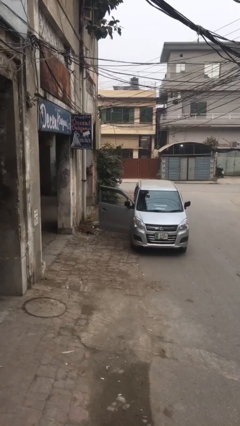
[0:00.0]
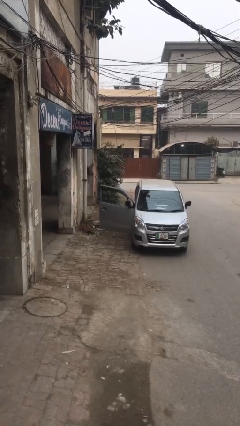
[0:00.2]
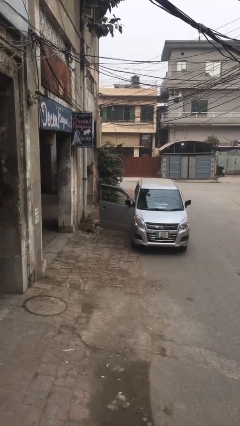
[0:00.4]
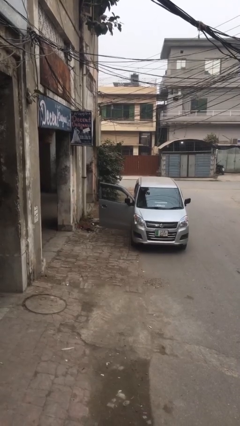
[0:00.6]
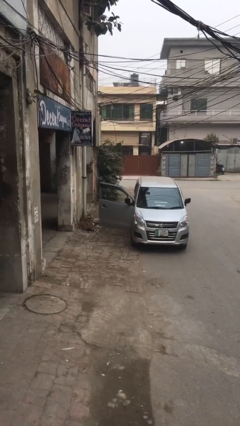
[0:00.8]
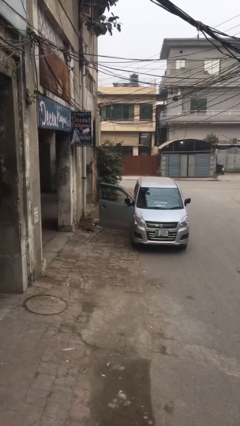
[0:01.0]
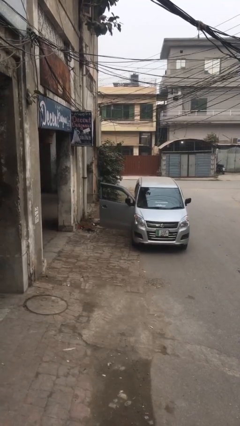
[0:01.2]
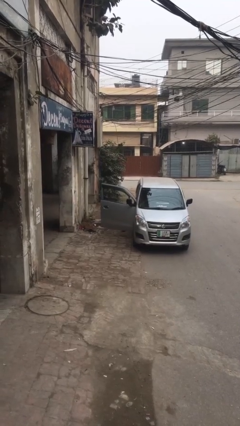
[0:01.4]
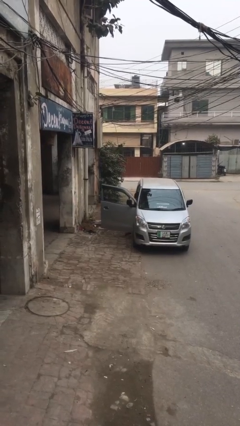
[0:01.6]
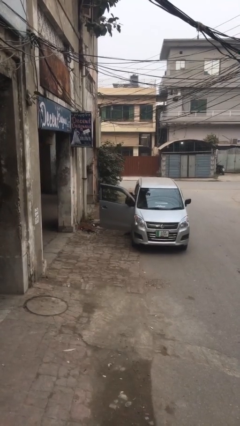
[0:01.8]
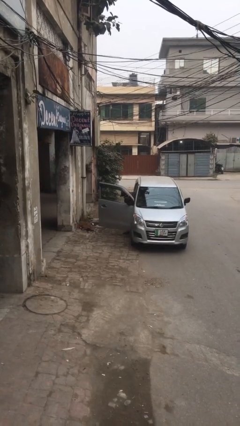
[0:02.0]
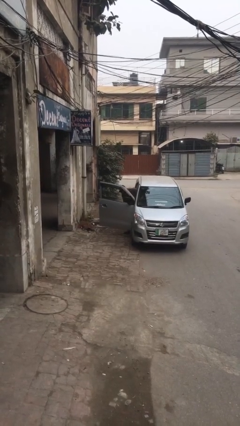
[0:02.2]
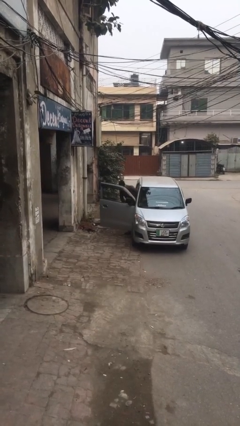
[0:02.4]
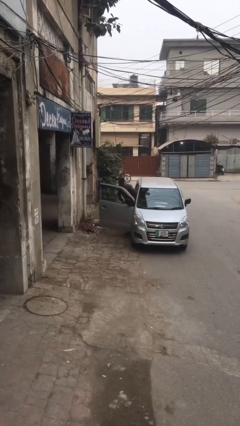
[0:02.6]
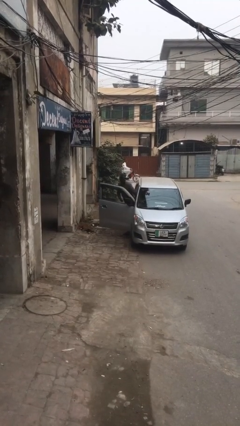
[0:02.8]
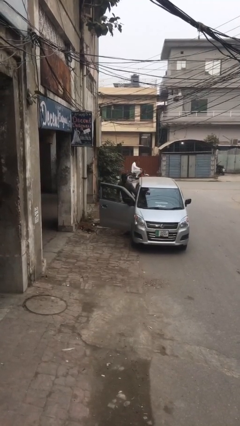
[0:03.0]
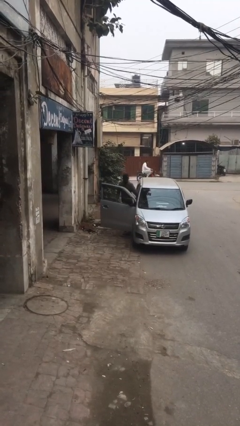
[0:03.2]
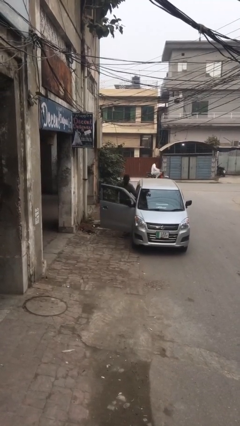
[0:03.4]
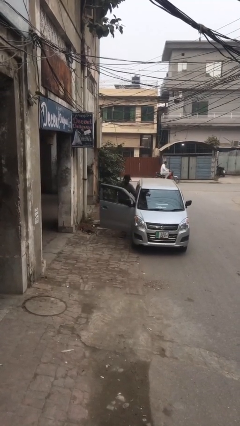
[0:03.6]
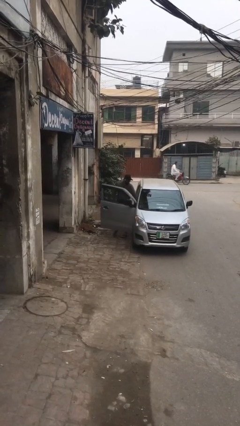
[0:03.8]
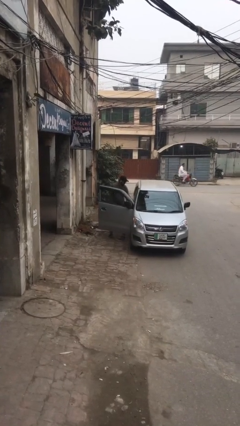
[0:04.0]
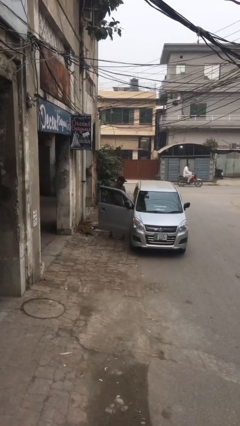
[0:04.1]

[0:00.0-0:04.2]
person exits car

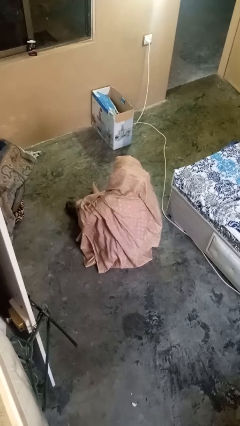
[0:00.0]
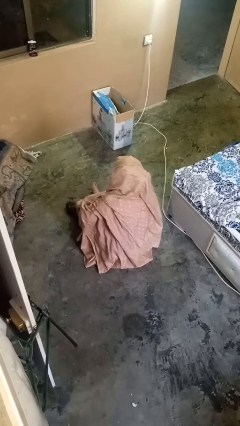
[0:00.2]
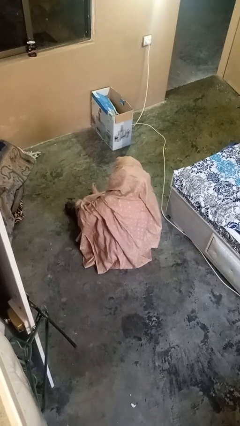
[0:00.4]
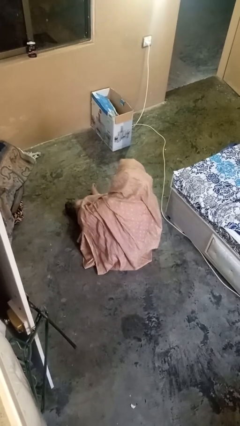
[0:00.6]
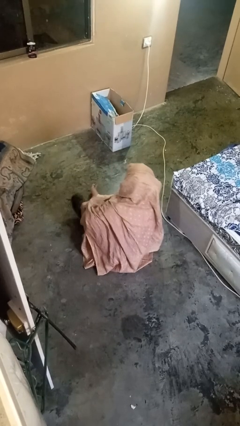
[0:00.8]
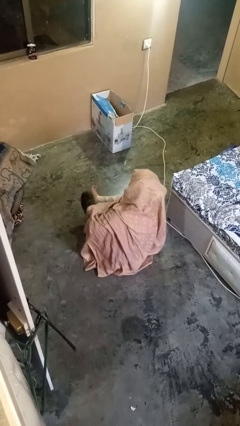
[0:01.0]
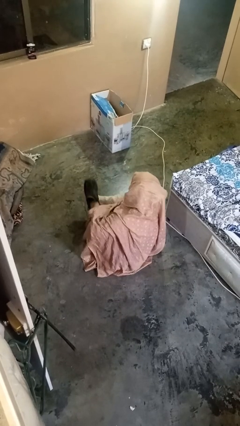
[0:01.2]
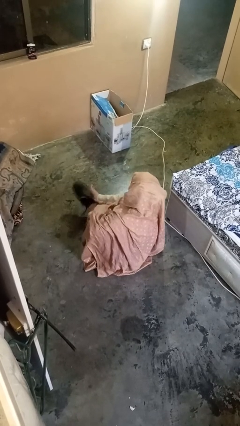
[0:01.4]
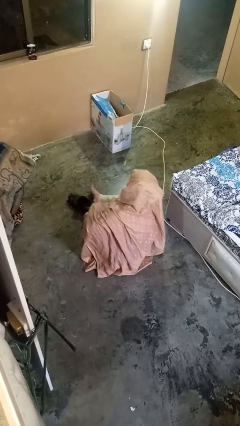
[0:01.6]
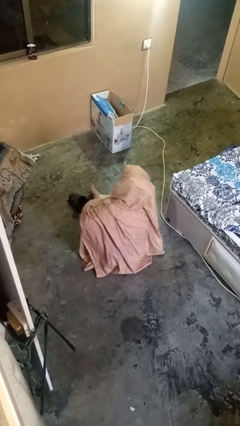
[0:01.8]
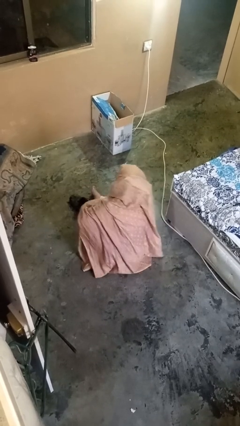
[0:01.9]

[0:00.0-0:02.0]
person takes off shoes

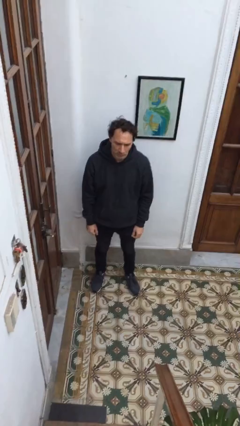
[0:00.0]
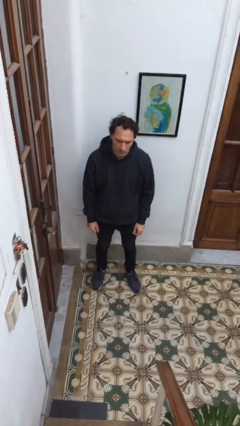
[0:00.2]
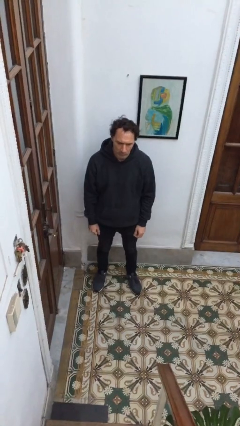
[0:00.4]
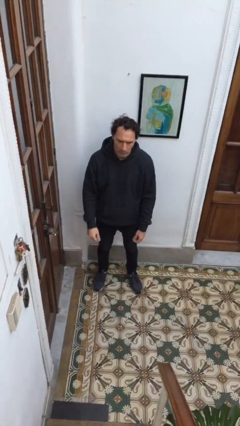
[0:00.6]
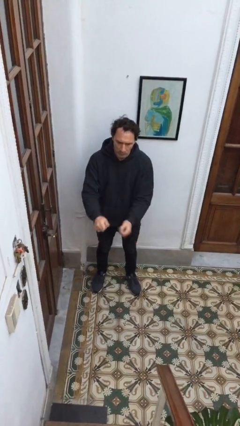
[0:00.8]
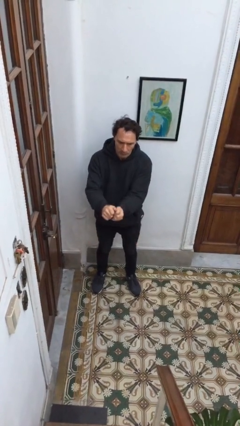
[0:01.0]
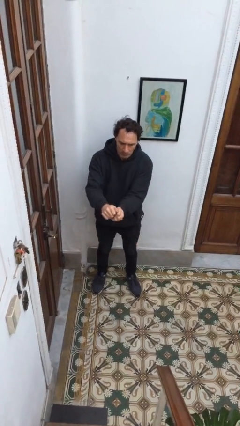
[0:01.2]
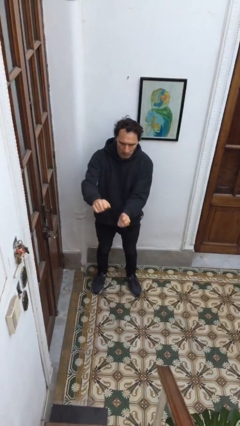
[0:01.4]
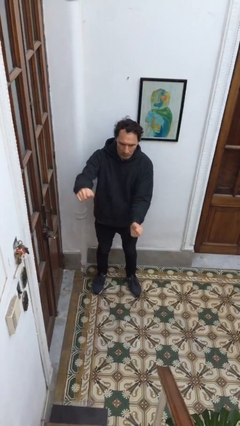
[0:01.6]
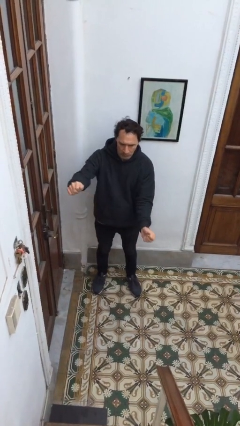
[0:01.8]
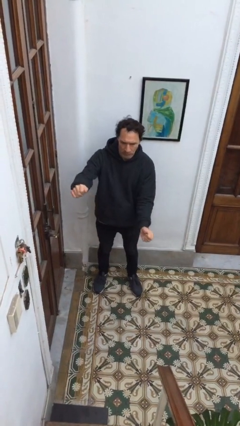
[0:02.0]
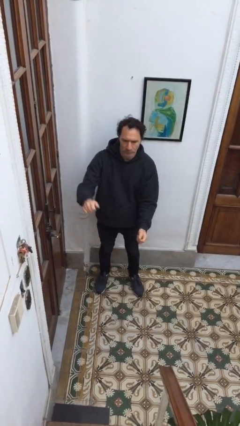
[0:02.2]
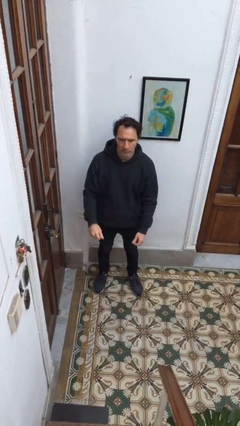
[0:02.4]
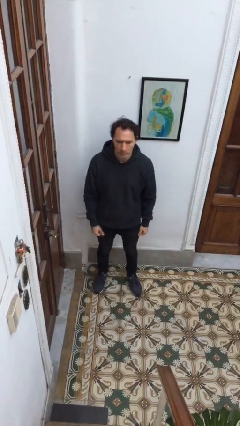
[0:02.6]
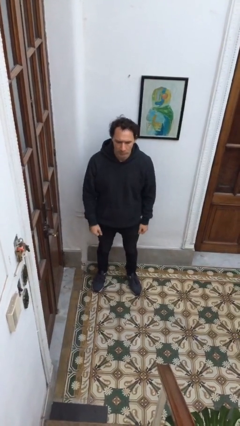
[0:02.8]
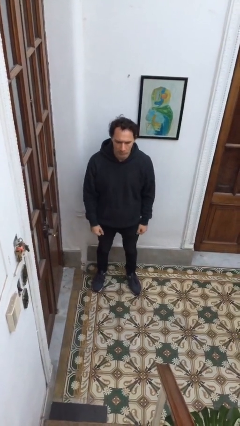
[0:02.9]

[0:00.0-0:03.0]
person gestures zoom in

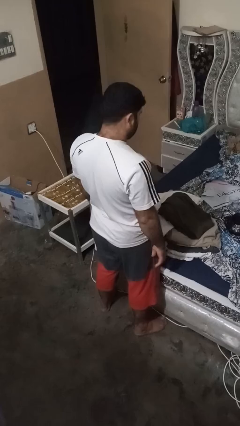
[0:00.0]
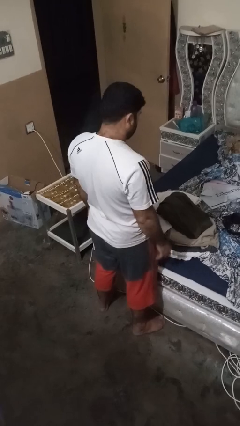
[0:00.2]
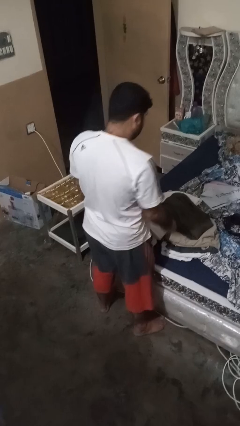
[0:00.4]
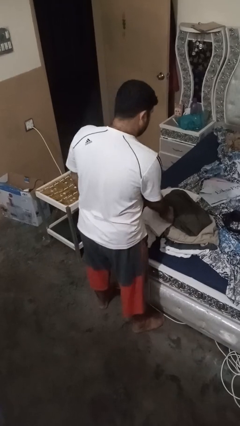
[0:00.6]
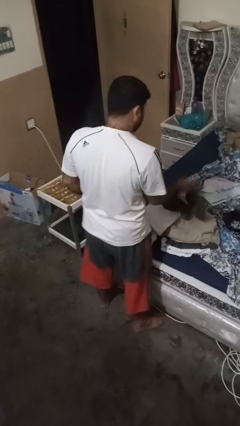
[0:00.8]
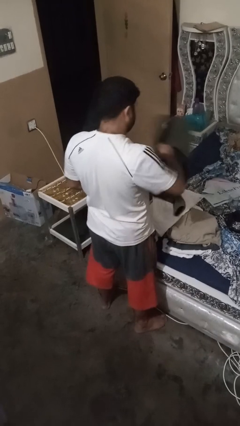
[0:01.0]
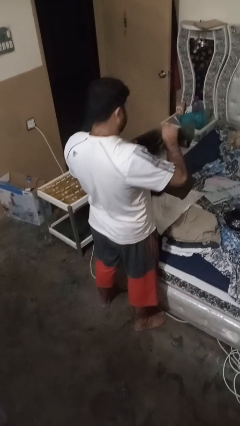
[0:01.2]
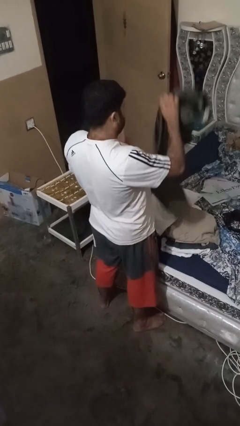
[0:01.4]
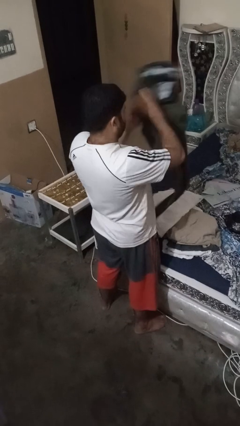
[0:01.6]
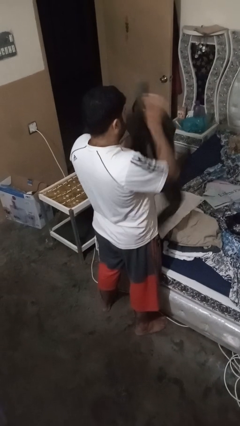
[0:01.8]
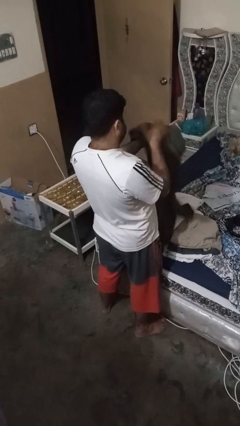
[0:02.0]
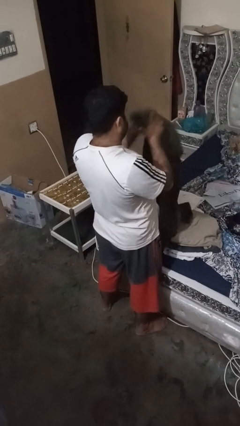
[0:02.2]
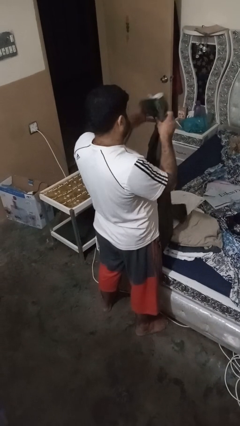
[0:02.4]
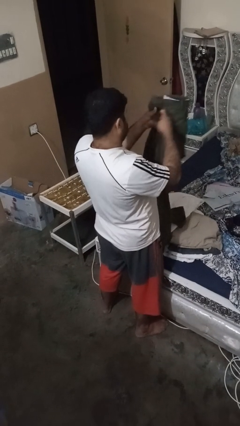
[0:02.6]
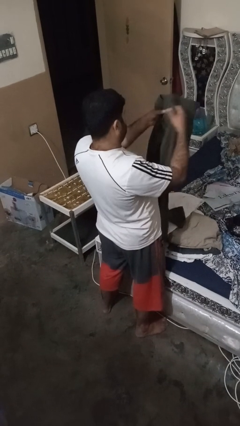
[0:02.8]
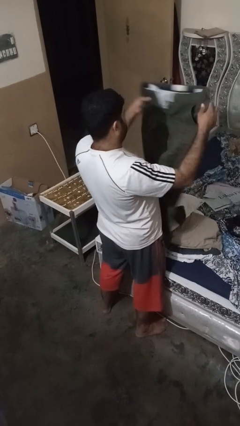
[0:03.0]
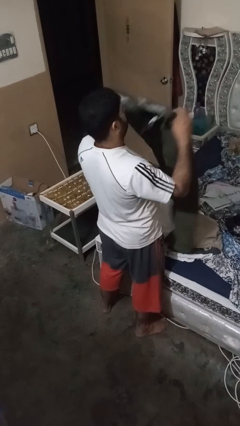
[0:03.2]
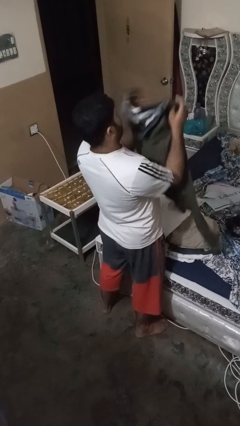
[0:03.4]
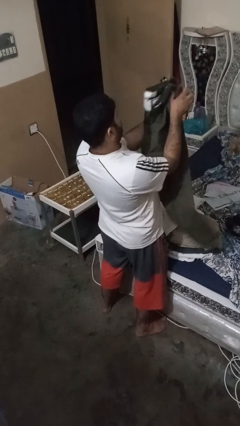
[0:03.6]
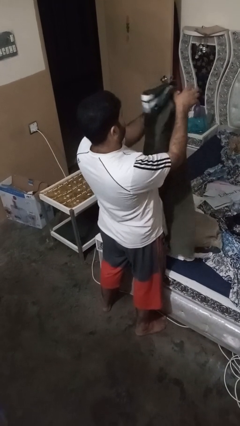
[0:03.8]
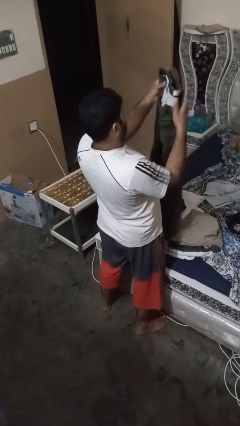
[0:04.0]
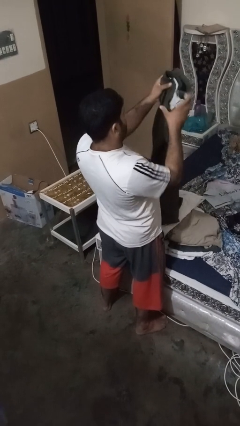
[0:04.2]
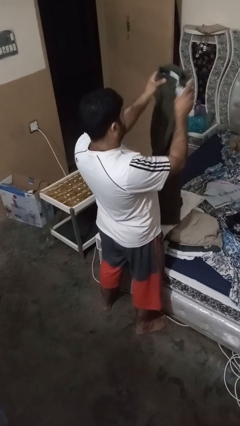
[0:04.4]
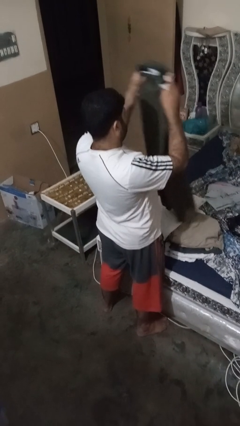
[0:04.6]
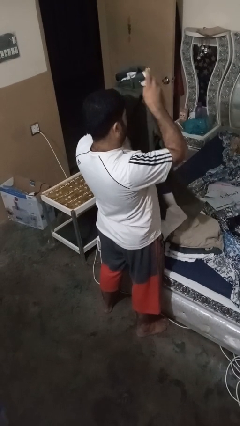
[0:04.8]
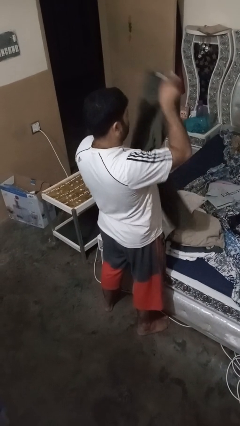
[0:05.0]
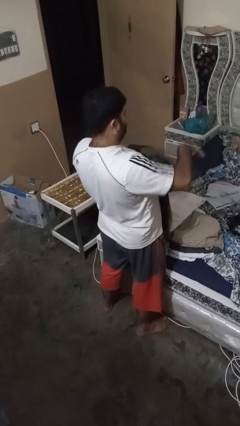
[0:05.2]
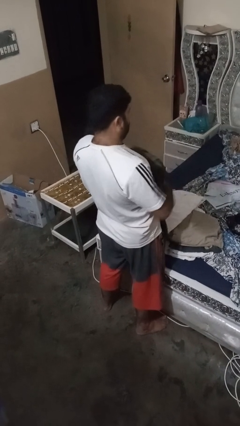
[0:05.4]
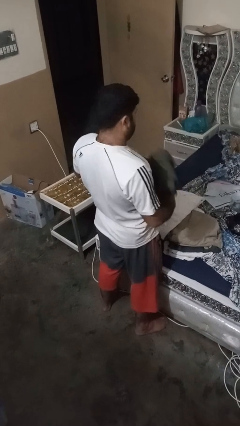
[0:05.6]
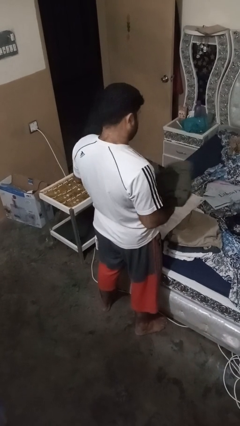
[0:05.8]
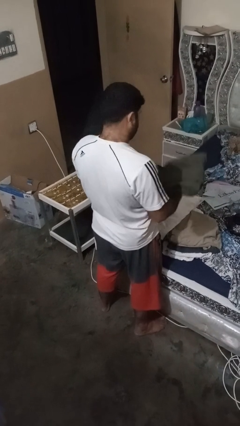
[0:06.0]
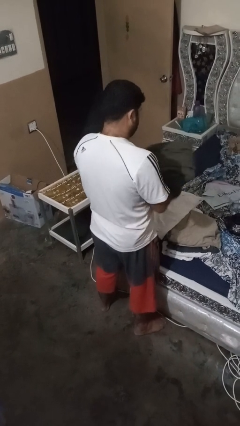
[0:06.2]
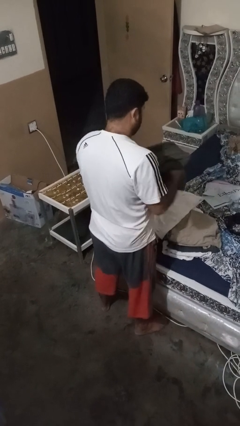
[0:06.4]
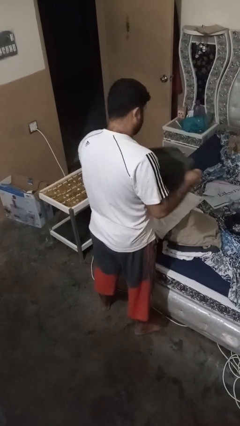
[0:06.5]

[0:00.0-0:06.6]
person folds pants

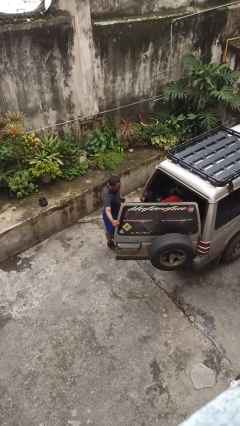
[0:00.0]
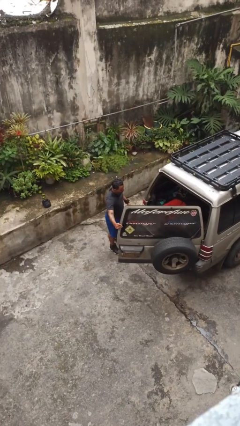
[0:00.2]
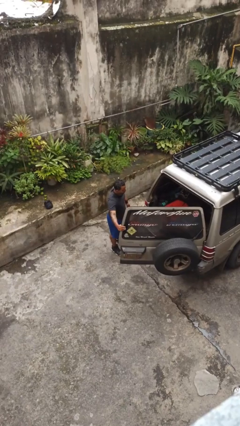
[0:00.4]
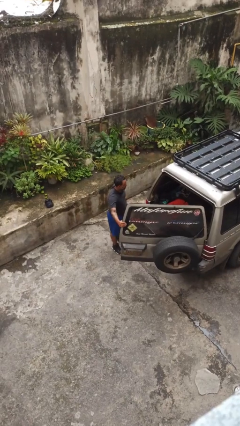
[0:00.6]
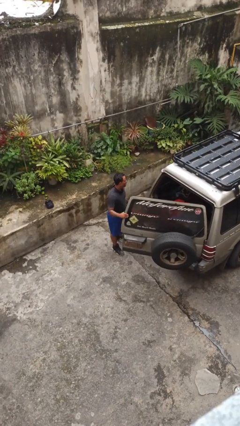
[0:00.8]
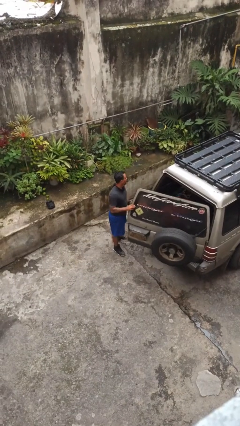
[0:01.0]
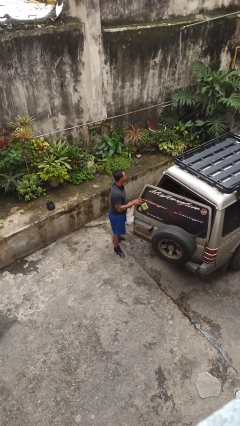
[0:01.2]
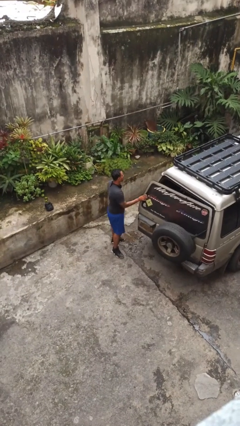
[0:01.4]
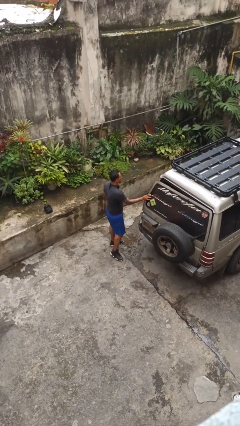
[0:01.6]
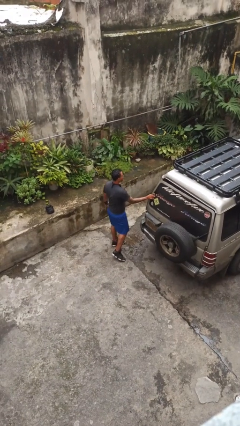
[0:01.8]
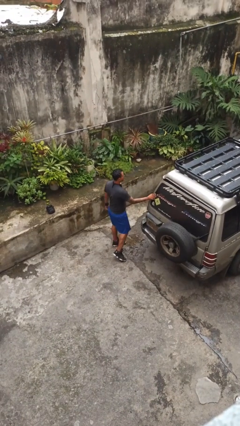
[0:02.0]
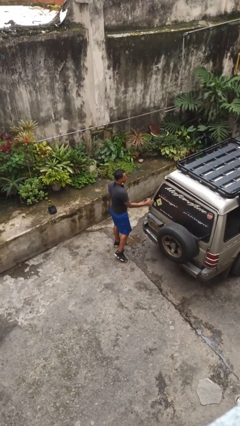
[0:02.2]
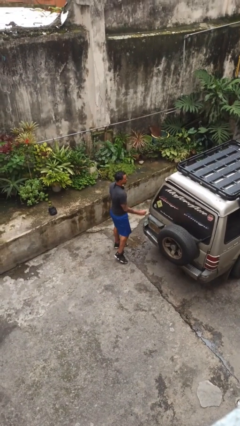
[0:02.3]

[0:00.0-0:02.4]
person closes car trunk
